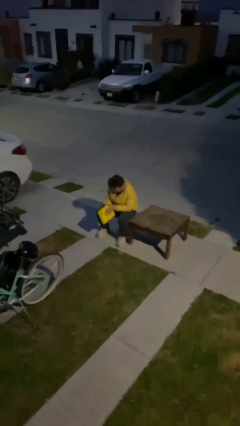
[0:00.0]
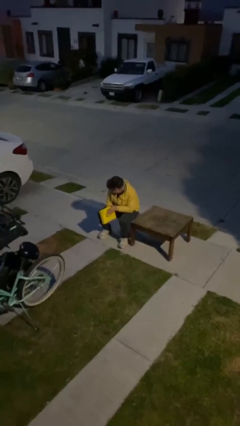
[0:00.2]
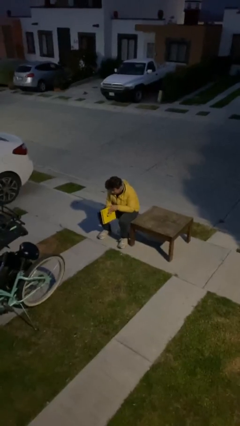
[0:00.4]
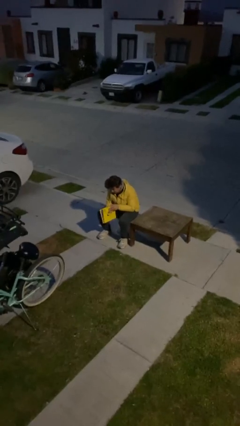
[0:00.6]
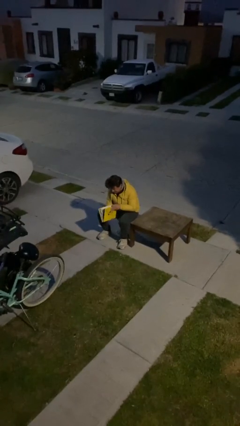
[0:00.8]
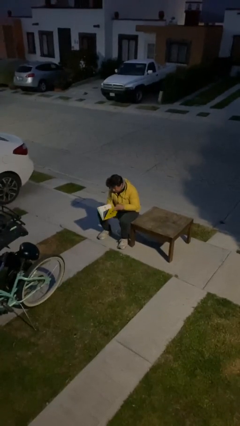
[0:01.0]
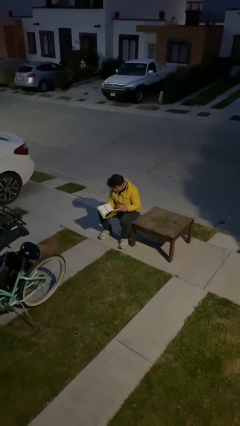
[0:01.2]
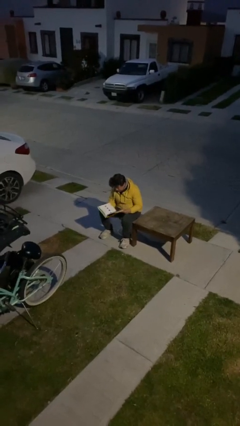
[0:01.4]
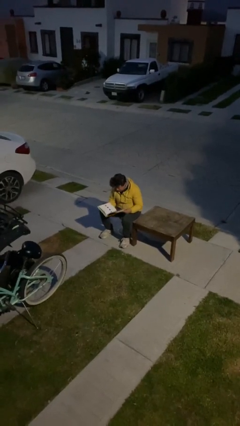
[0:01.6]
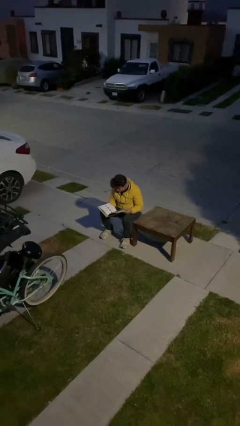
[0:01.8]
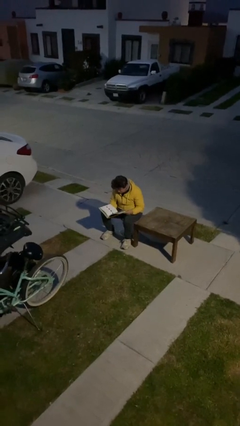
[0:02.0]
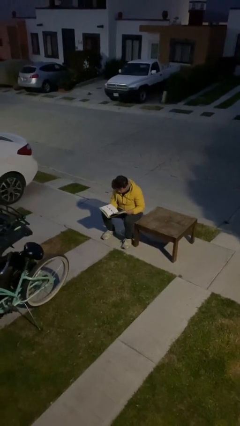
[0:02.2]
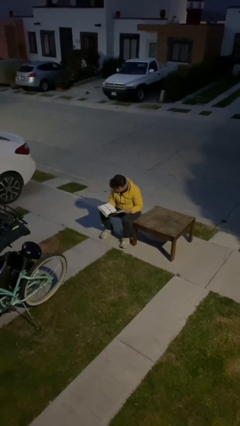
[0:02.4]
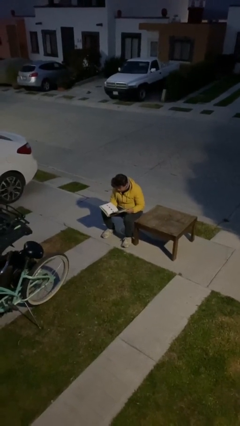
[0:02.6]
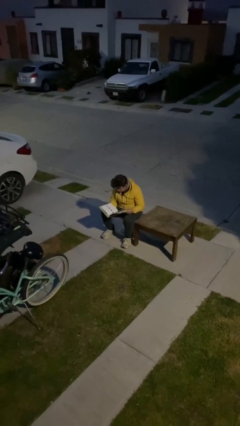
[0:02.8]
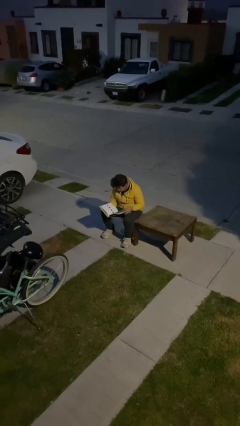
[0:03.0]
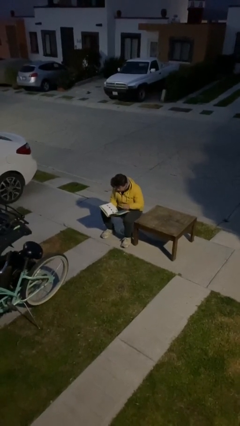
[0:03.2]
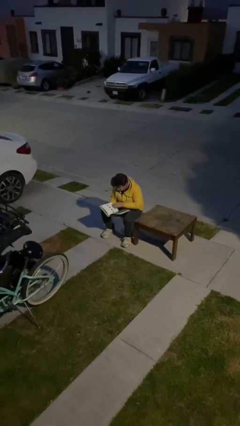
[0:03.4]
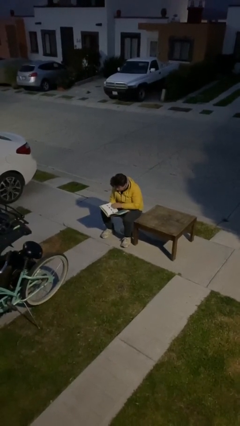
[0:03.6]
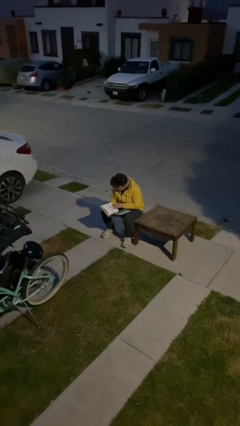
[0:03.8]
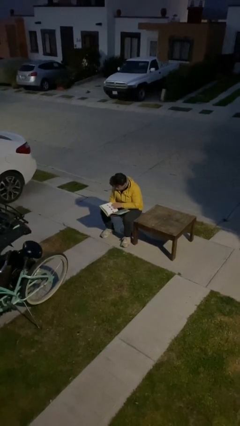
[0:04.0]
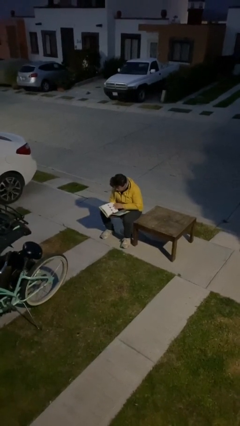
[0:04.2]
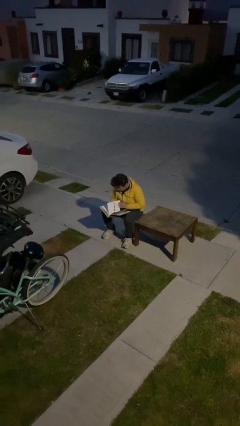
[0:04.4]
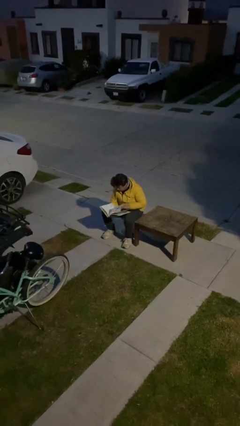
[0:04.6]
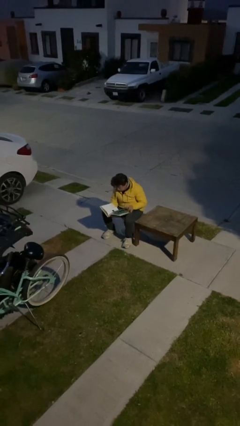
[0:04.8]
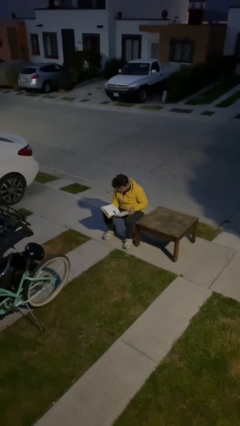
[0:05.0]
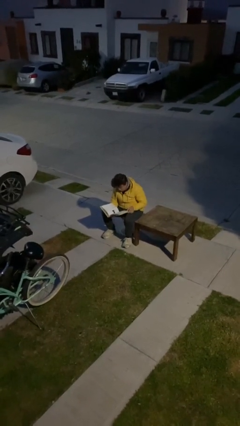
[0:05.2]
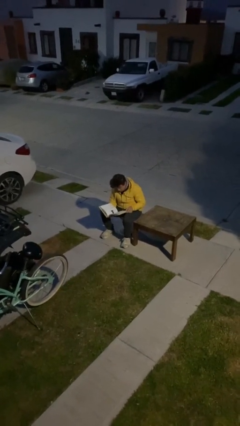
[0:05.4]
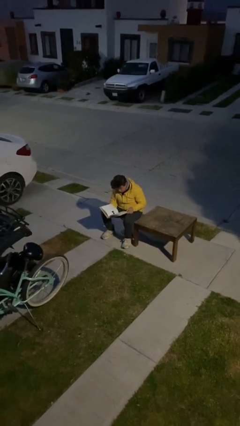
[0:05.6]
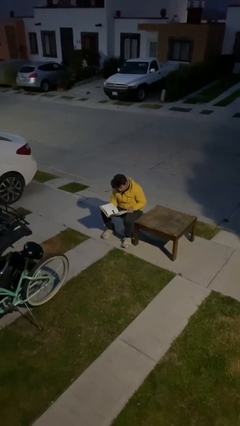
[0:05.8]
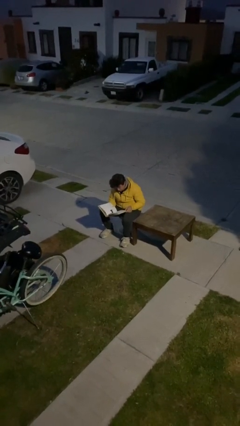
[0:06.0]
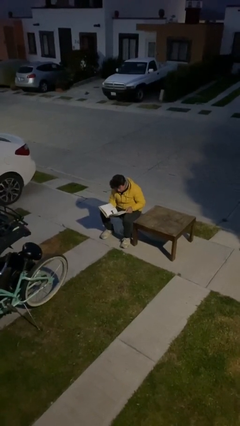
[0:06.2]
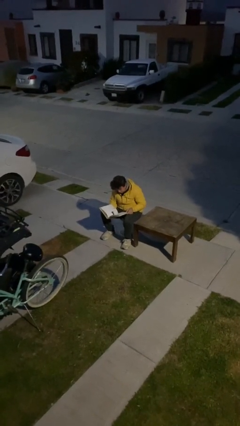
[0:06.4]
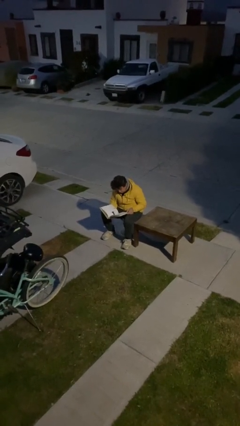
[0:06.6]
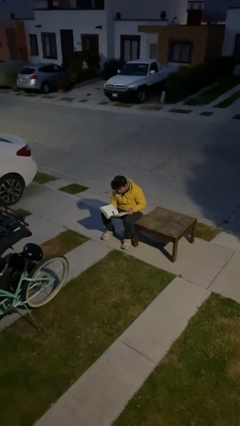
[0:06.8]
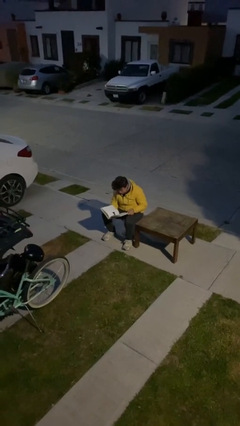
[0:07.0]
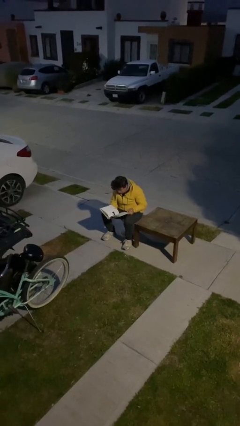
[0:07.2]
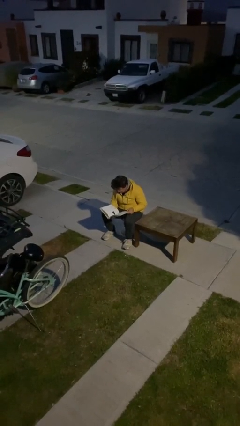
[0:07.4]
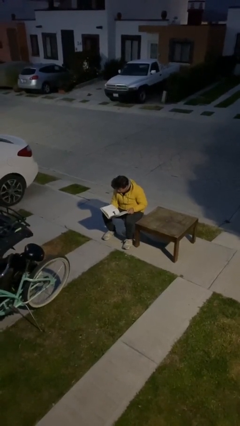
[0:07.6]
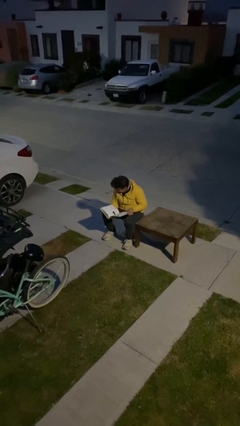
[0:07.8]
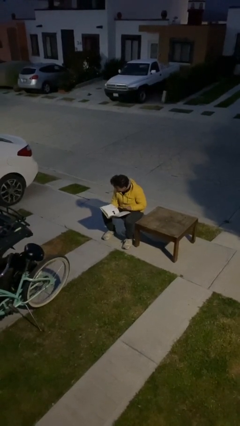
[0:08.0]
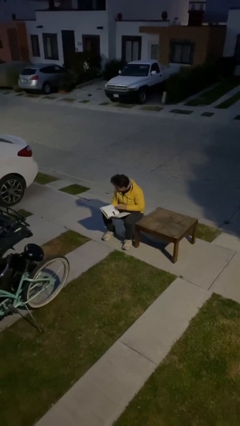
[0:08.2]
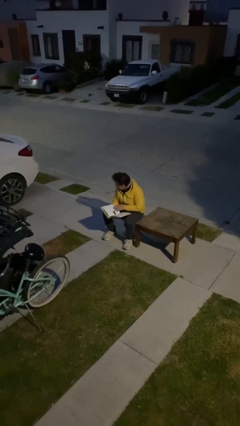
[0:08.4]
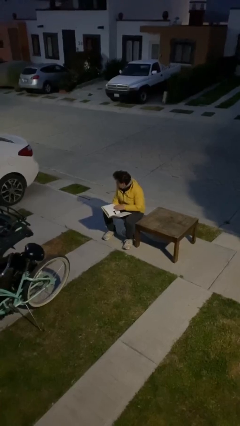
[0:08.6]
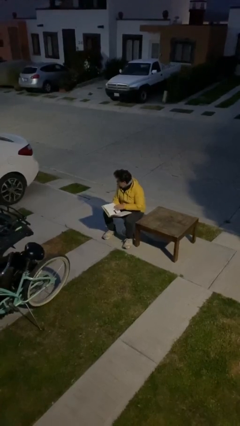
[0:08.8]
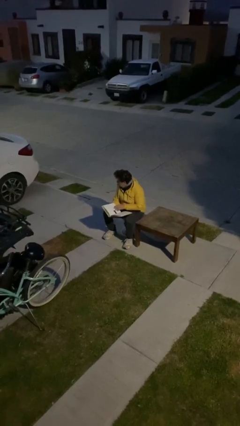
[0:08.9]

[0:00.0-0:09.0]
person reads document

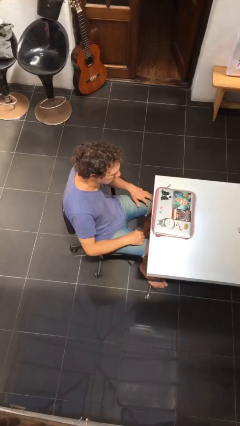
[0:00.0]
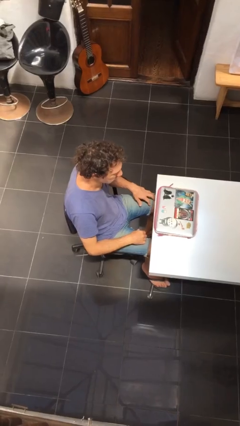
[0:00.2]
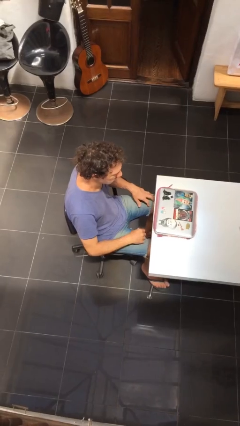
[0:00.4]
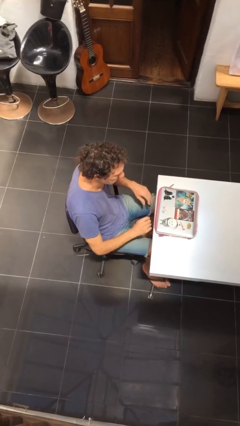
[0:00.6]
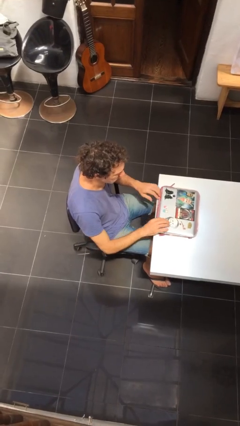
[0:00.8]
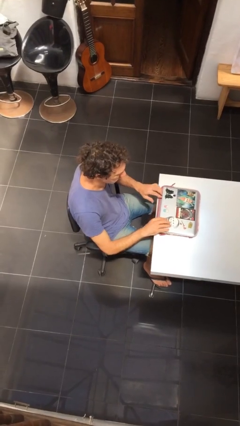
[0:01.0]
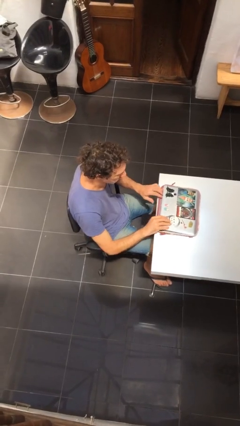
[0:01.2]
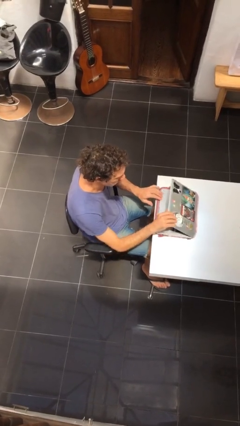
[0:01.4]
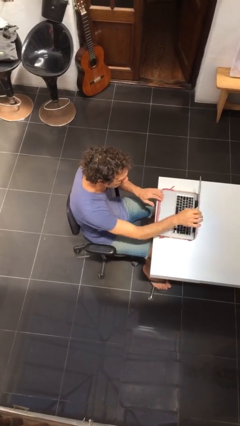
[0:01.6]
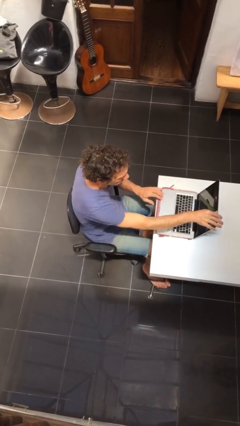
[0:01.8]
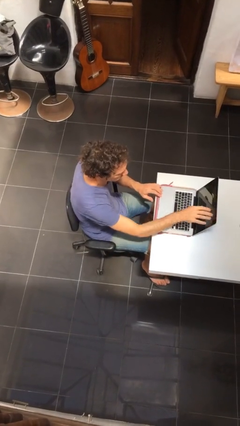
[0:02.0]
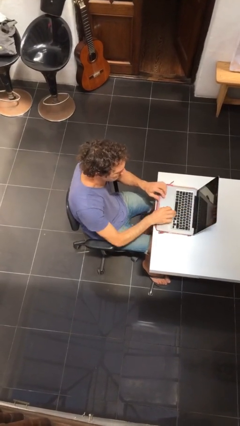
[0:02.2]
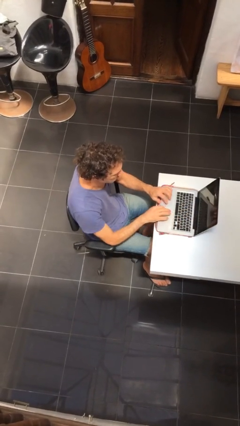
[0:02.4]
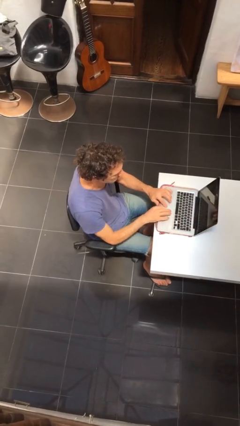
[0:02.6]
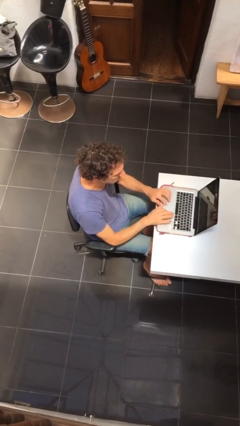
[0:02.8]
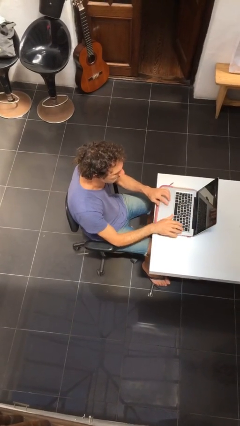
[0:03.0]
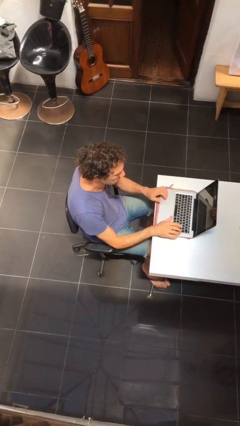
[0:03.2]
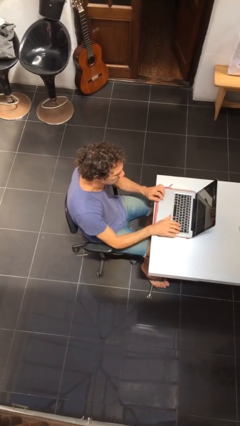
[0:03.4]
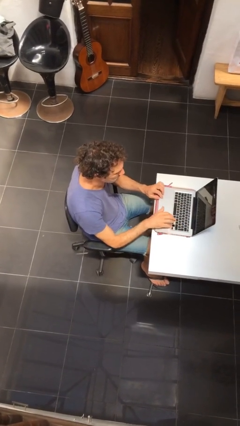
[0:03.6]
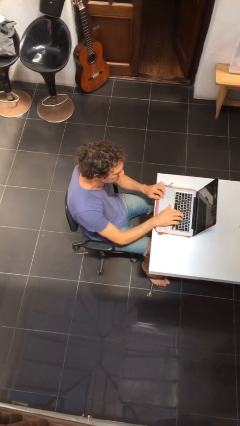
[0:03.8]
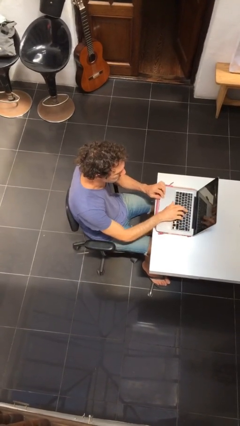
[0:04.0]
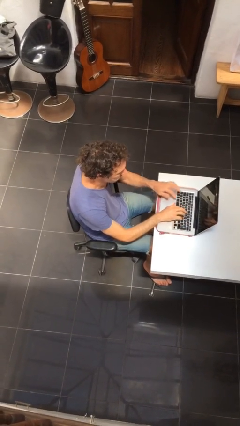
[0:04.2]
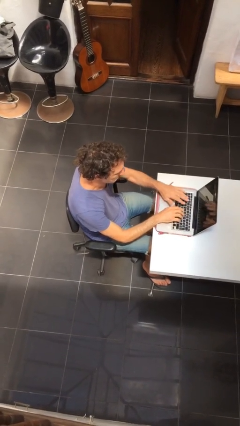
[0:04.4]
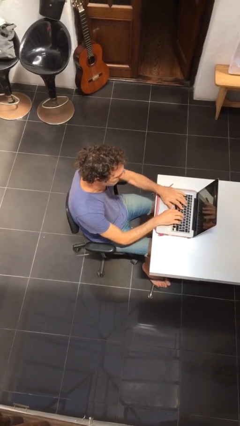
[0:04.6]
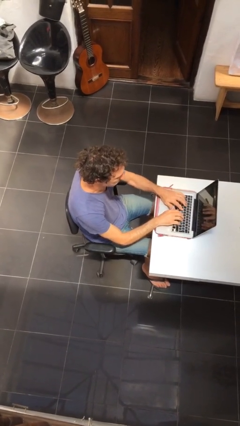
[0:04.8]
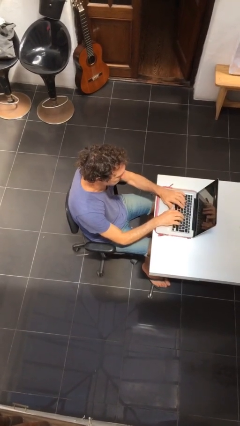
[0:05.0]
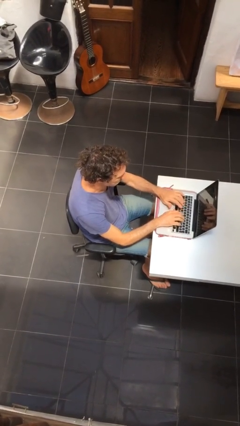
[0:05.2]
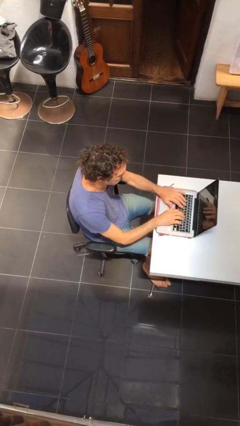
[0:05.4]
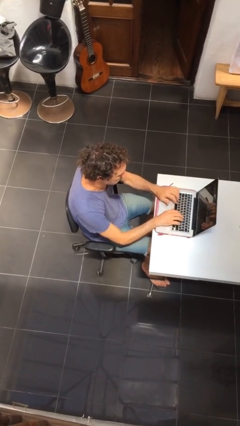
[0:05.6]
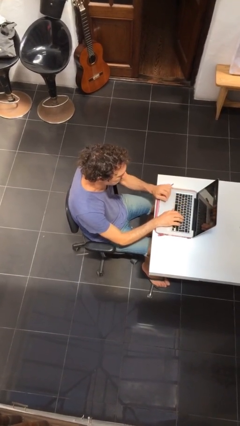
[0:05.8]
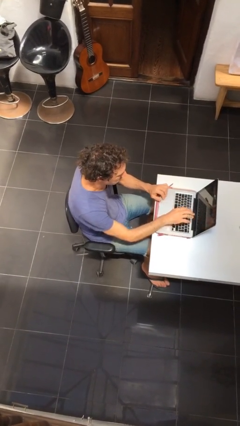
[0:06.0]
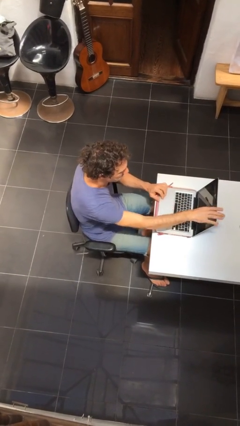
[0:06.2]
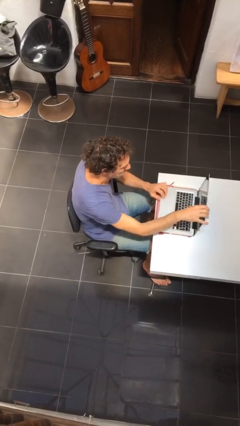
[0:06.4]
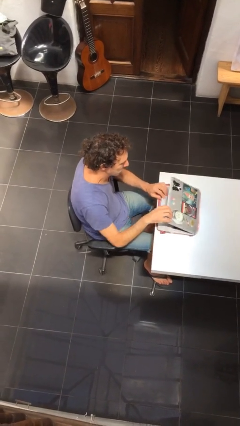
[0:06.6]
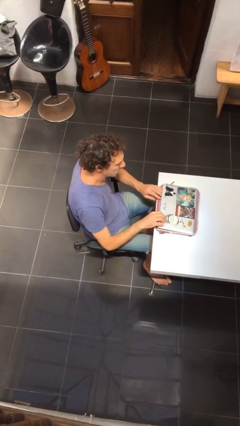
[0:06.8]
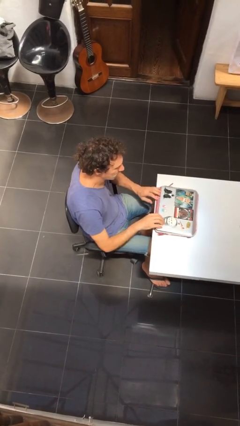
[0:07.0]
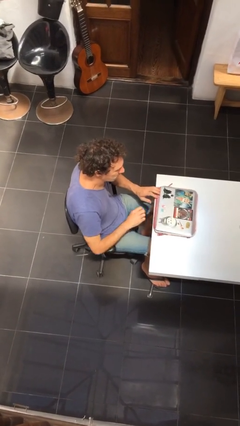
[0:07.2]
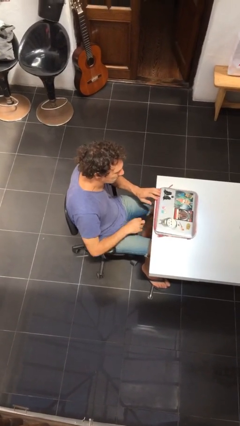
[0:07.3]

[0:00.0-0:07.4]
person interacts with laptop

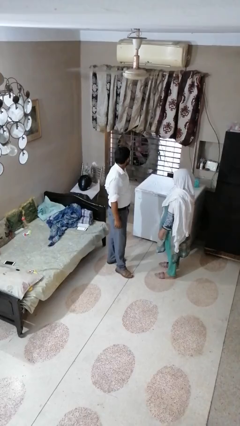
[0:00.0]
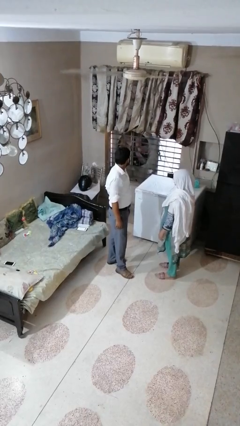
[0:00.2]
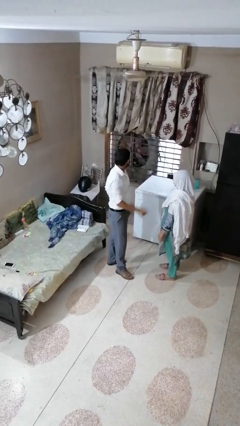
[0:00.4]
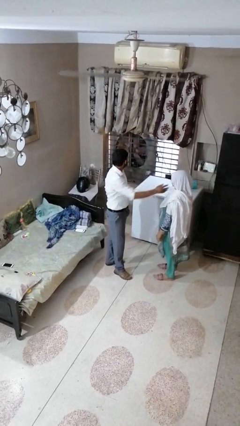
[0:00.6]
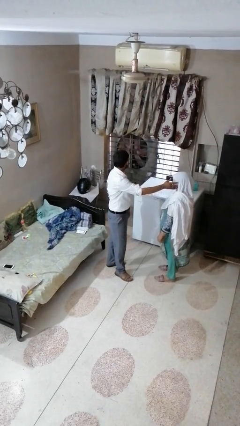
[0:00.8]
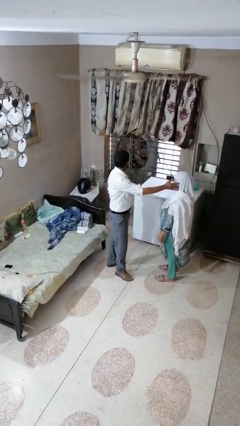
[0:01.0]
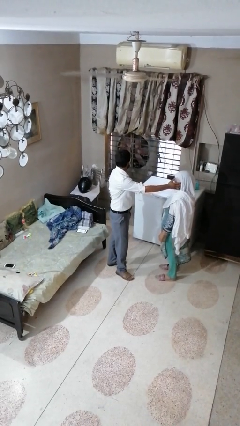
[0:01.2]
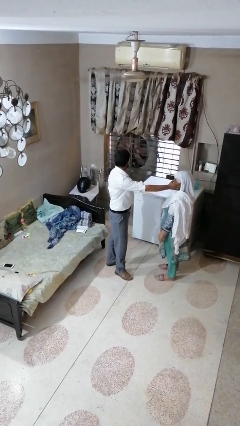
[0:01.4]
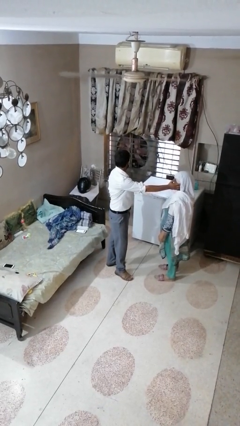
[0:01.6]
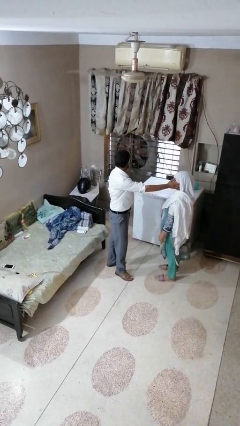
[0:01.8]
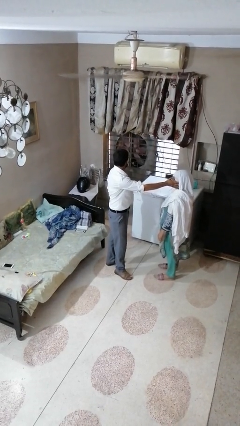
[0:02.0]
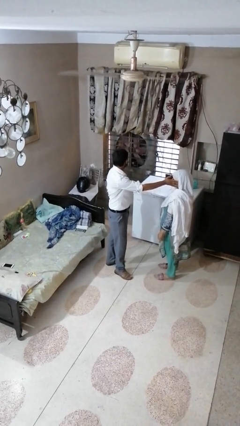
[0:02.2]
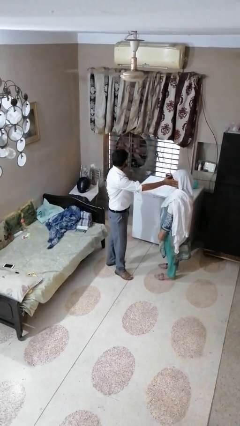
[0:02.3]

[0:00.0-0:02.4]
person touches face of person
